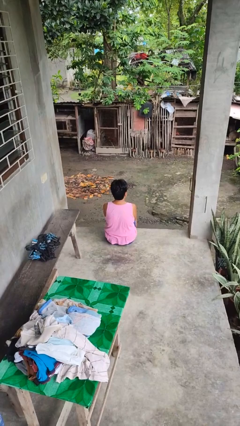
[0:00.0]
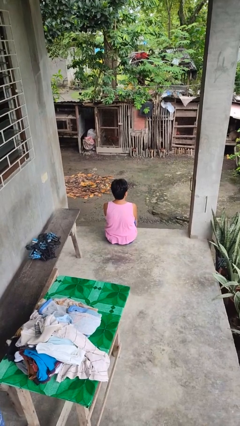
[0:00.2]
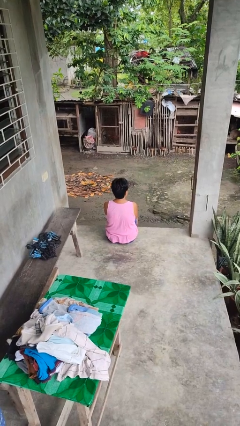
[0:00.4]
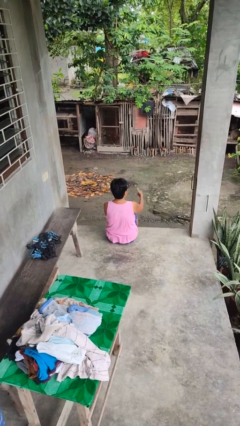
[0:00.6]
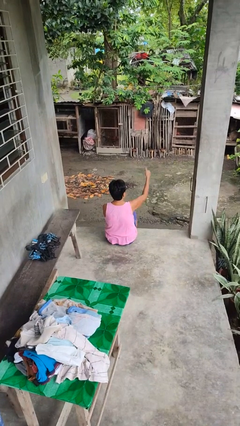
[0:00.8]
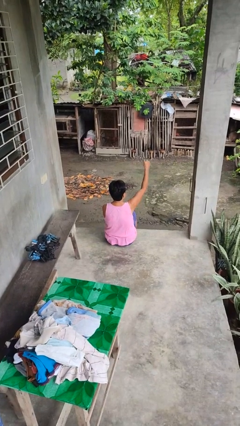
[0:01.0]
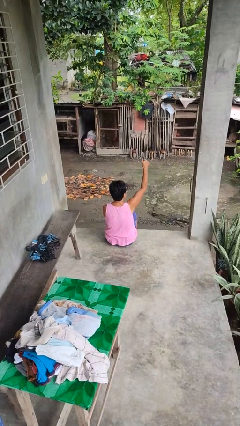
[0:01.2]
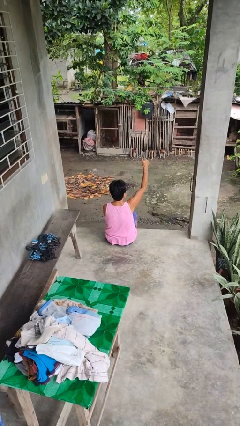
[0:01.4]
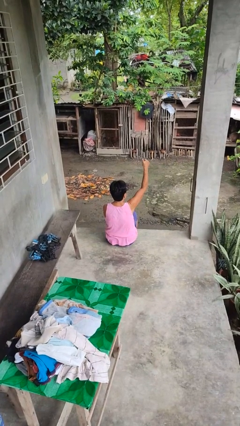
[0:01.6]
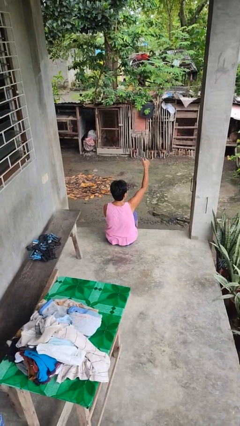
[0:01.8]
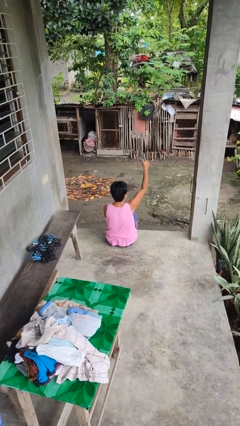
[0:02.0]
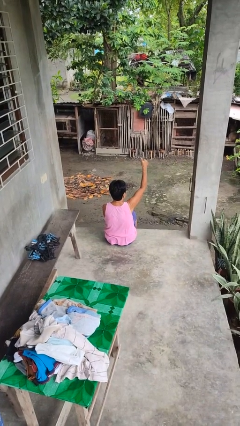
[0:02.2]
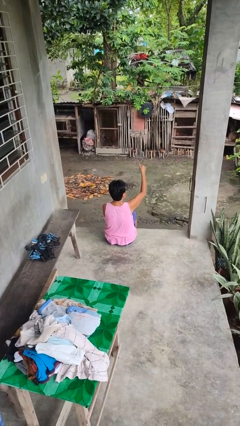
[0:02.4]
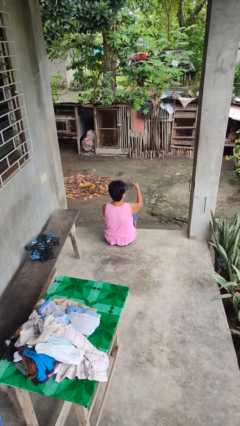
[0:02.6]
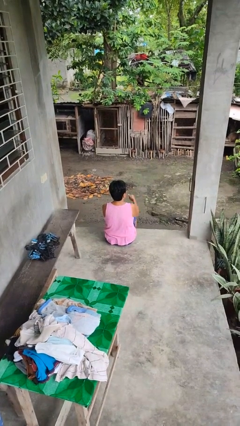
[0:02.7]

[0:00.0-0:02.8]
person gestures thumbs up

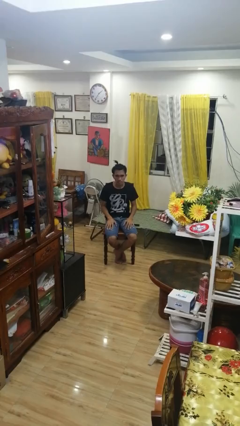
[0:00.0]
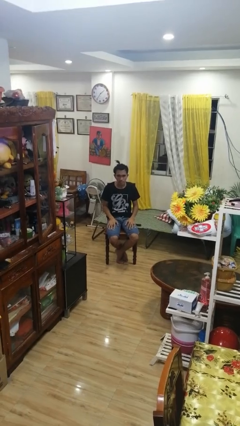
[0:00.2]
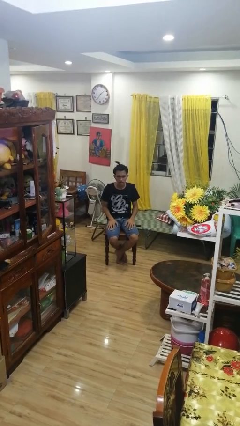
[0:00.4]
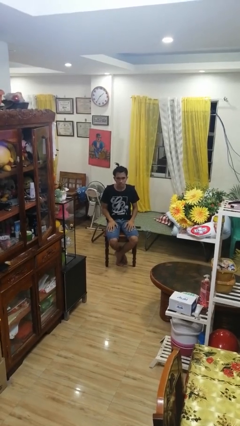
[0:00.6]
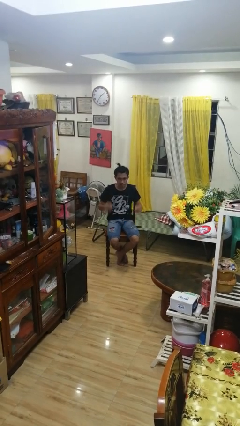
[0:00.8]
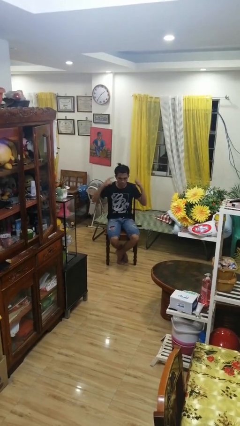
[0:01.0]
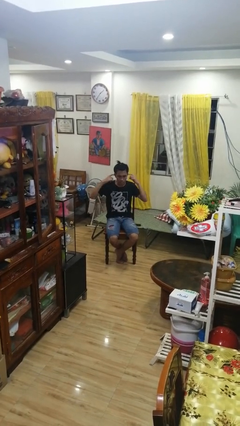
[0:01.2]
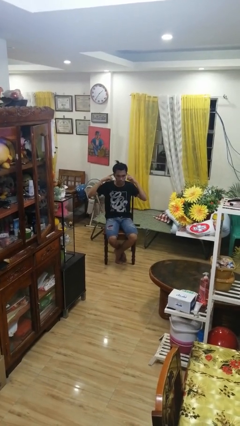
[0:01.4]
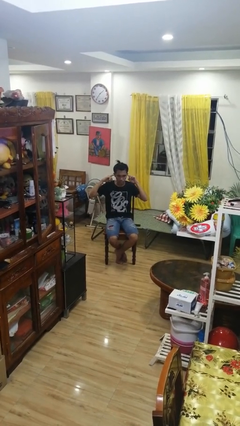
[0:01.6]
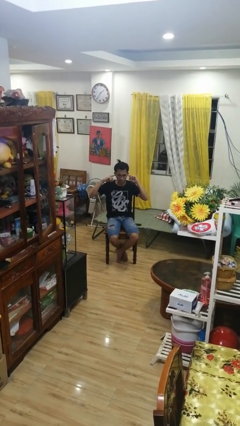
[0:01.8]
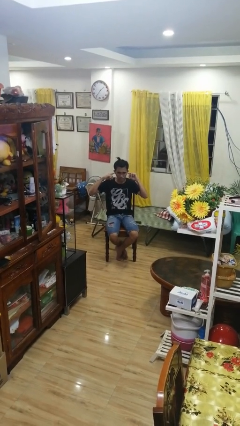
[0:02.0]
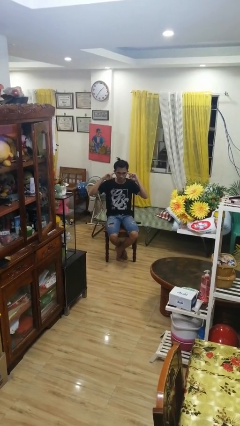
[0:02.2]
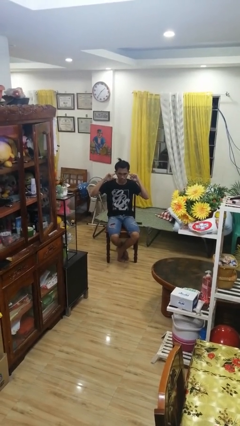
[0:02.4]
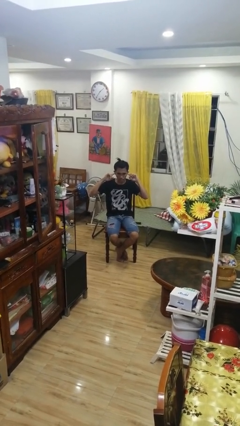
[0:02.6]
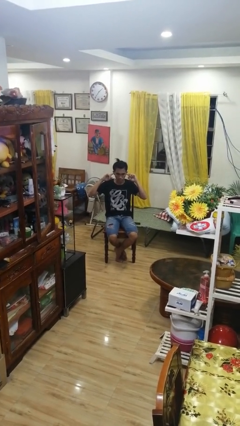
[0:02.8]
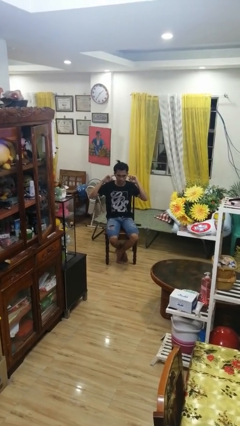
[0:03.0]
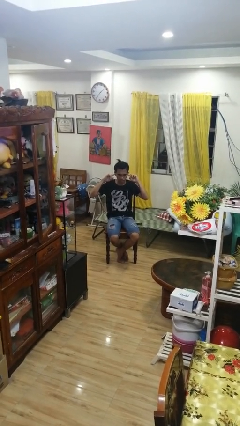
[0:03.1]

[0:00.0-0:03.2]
person puts fingers in ear

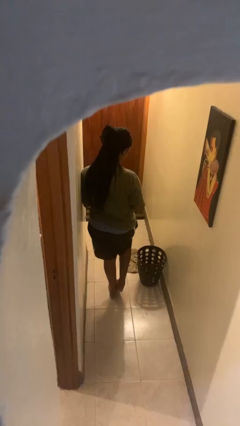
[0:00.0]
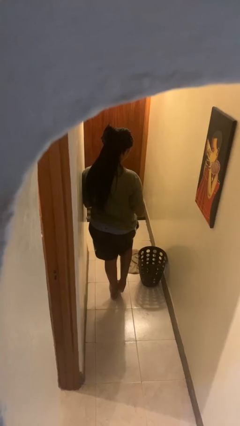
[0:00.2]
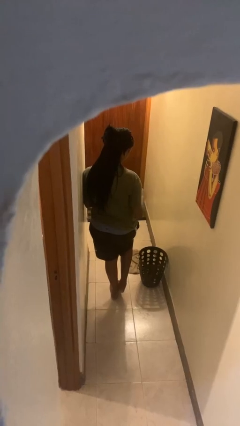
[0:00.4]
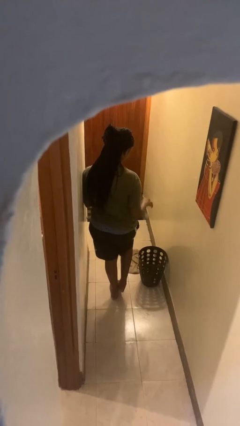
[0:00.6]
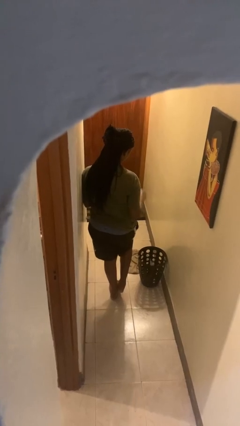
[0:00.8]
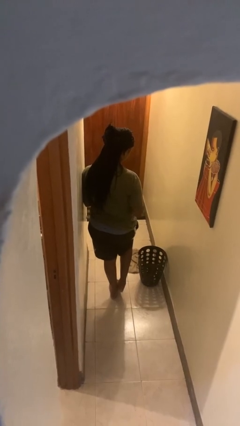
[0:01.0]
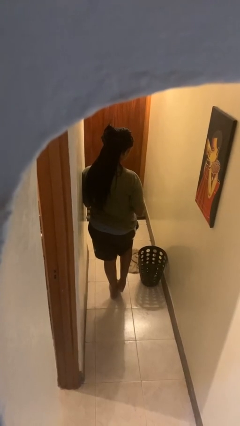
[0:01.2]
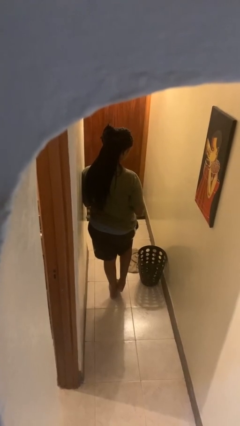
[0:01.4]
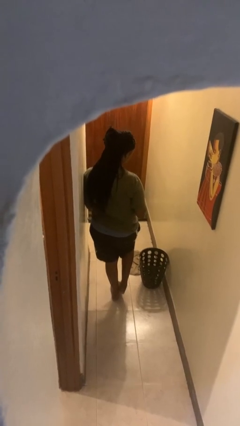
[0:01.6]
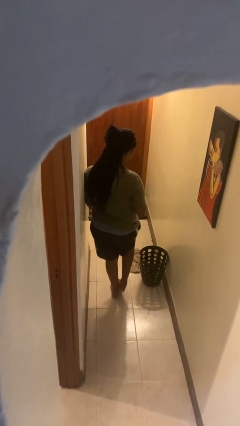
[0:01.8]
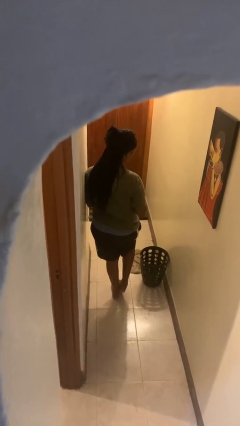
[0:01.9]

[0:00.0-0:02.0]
person discards trash

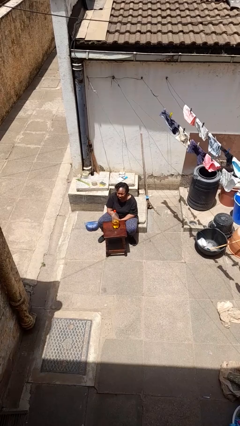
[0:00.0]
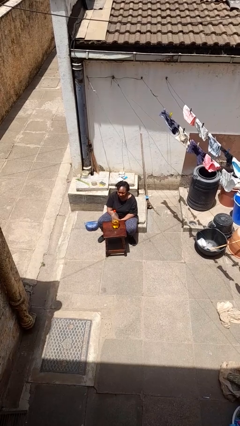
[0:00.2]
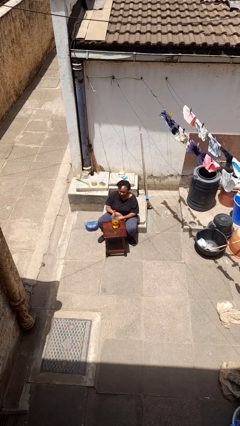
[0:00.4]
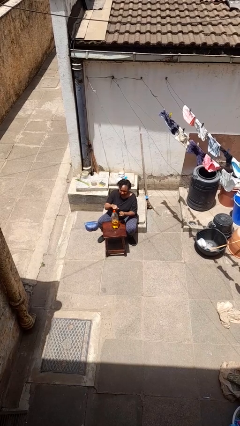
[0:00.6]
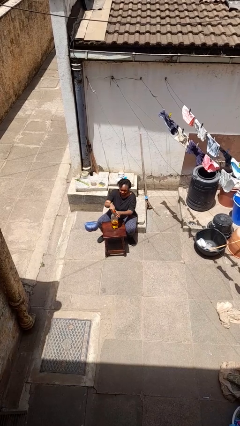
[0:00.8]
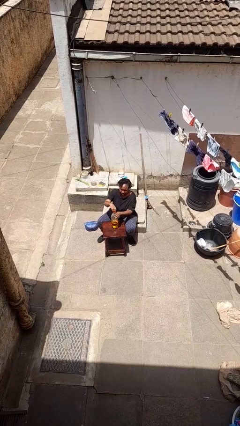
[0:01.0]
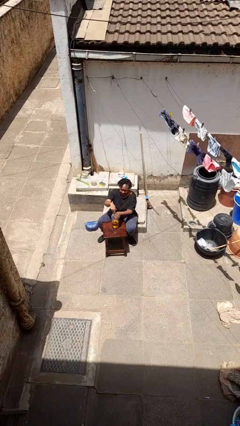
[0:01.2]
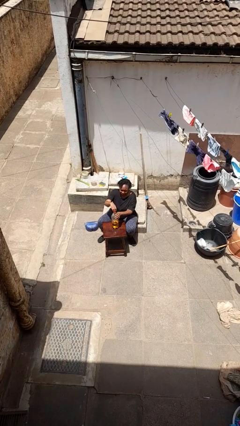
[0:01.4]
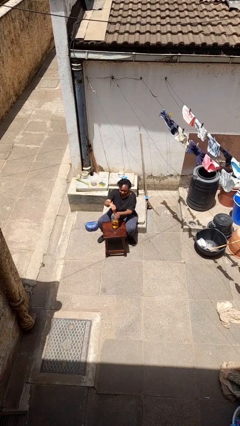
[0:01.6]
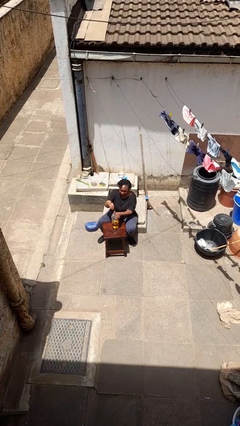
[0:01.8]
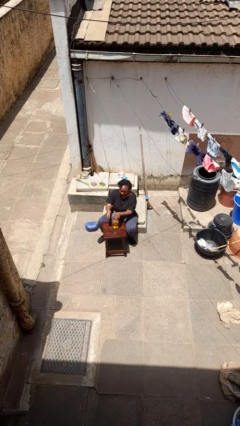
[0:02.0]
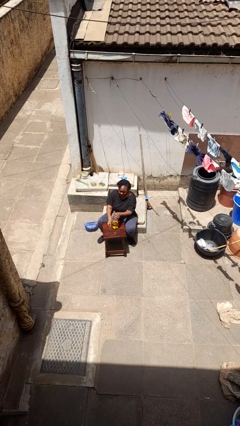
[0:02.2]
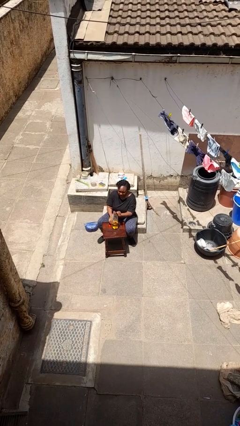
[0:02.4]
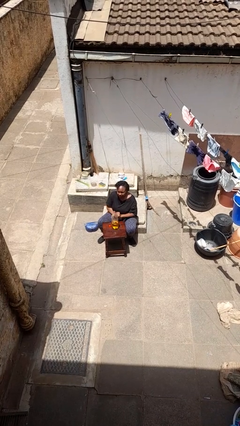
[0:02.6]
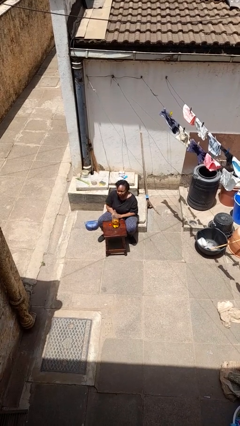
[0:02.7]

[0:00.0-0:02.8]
person unscrews lid from bottle

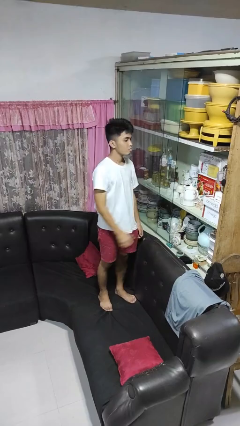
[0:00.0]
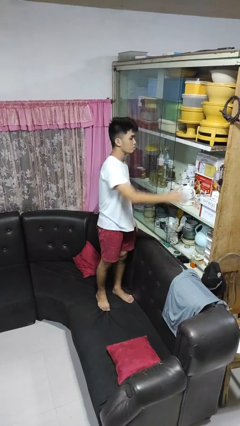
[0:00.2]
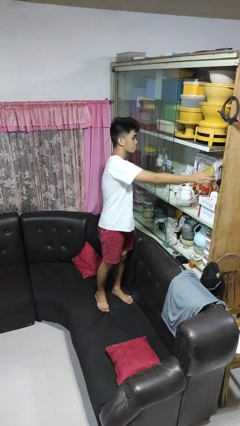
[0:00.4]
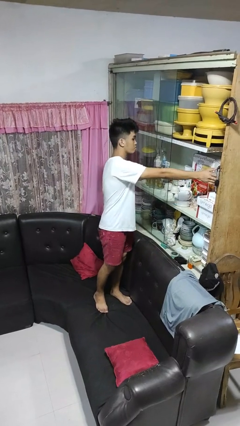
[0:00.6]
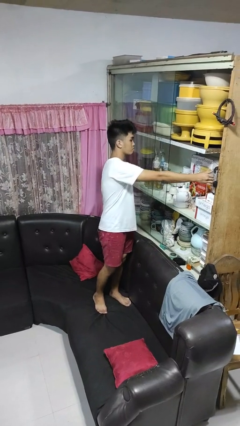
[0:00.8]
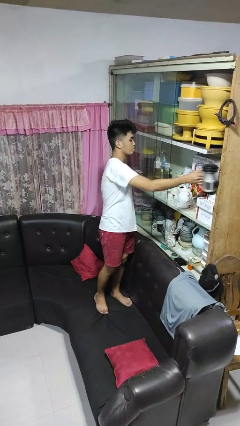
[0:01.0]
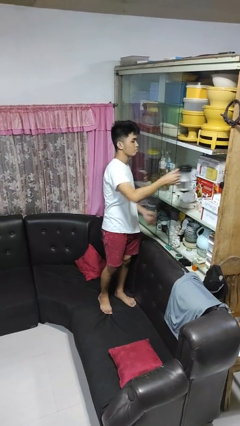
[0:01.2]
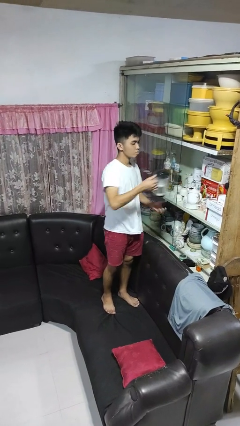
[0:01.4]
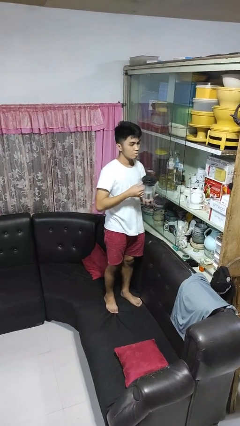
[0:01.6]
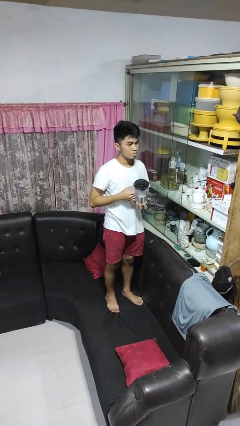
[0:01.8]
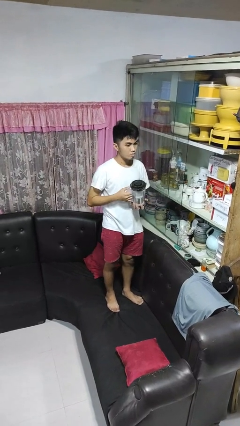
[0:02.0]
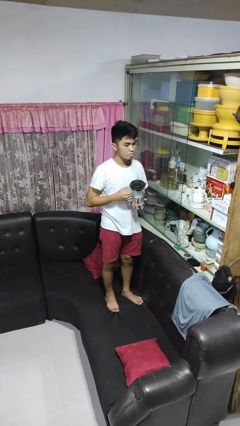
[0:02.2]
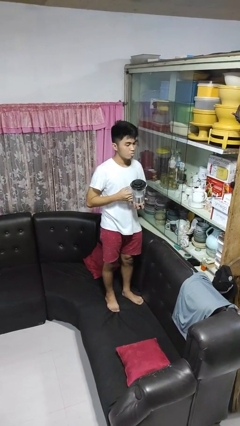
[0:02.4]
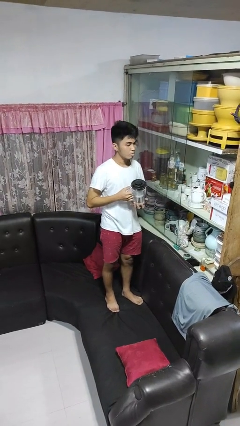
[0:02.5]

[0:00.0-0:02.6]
person picks up object from cabinet

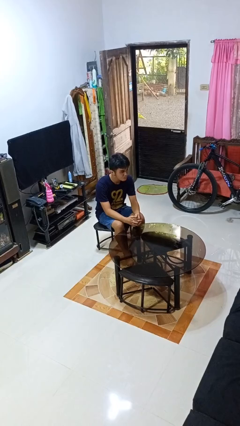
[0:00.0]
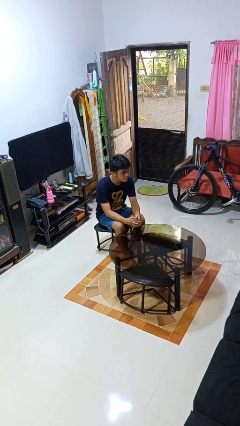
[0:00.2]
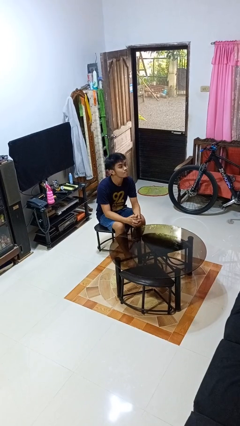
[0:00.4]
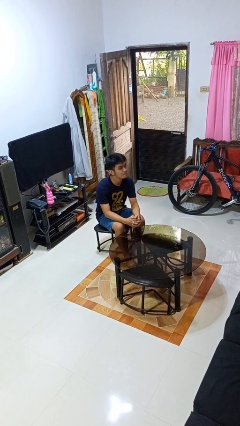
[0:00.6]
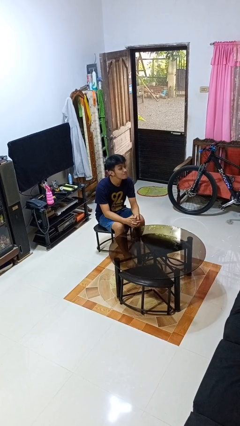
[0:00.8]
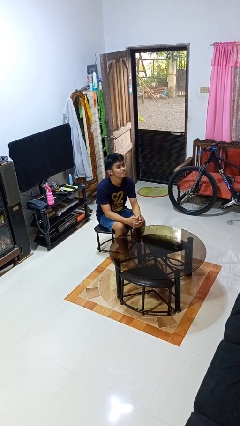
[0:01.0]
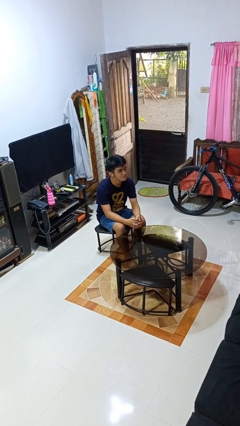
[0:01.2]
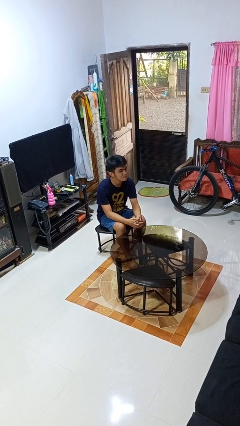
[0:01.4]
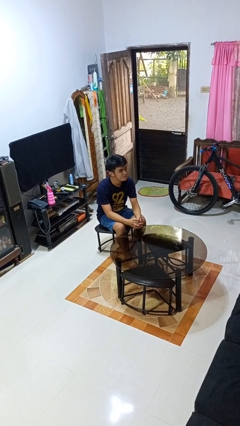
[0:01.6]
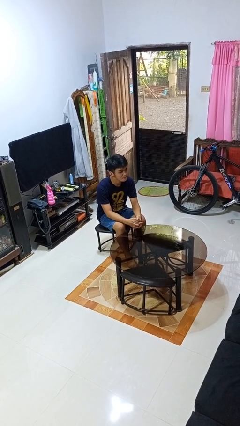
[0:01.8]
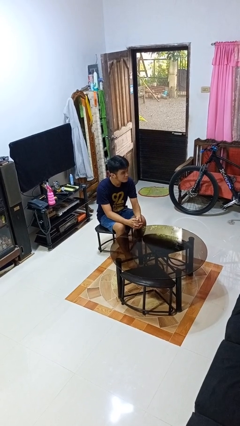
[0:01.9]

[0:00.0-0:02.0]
person nods head

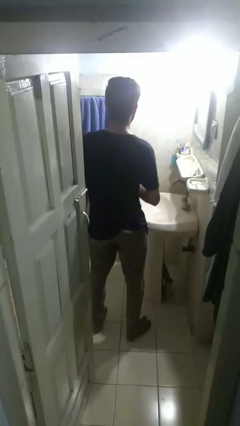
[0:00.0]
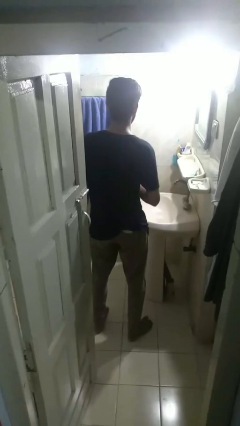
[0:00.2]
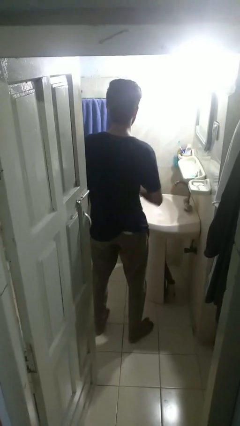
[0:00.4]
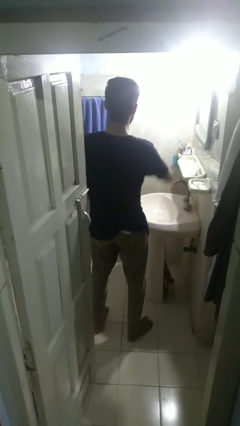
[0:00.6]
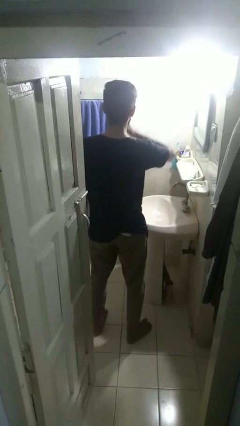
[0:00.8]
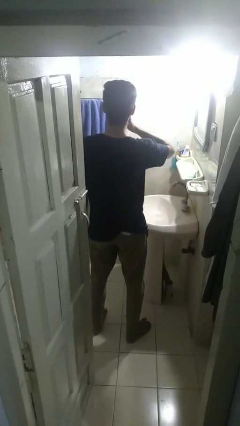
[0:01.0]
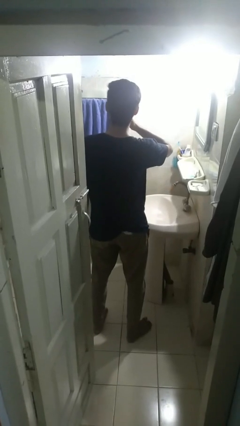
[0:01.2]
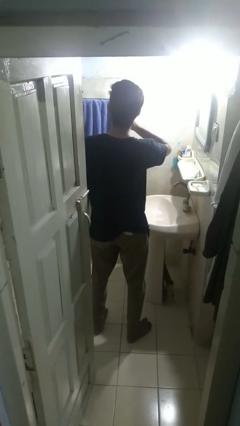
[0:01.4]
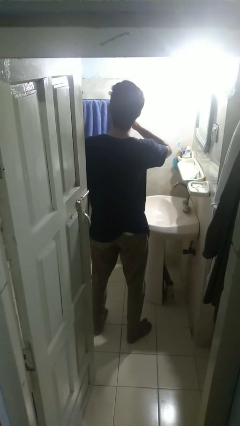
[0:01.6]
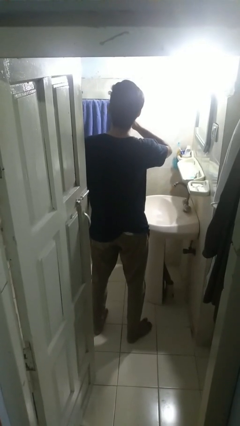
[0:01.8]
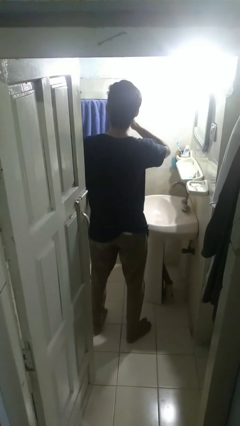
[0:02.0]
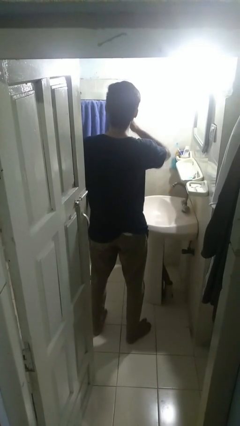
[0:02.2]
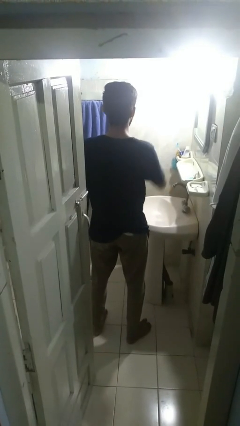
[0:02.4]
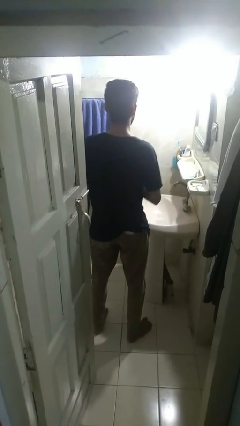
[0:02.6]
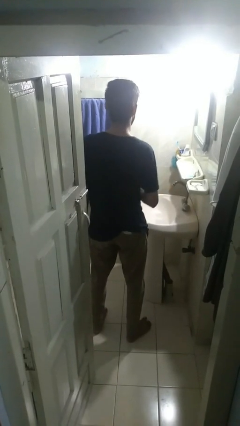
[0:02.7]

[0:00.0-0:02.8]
person flosses
